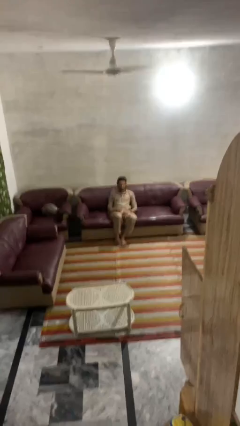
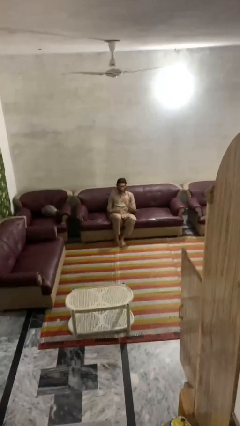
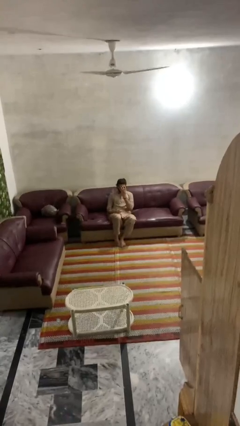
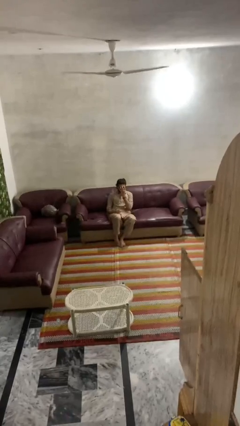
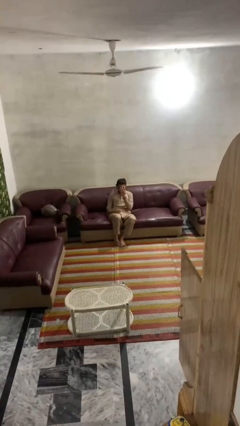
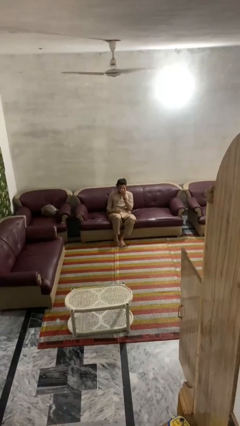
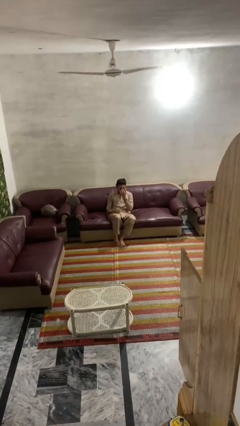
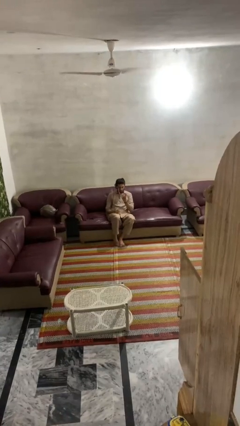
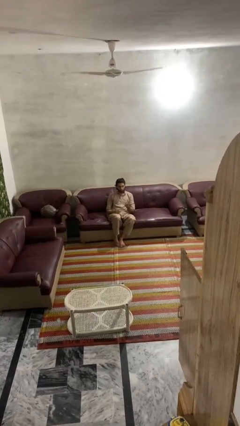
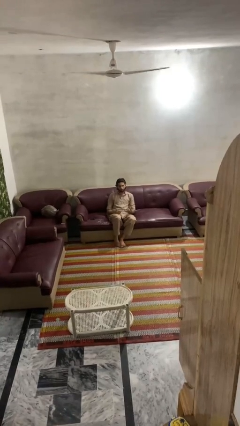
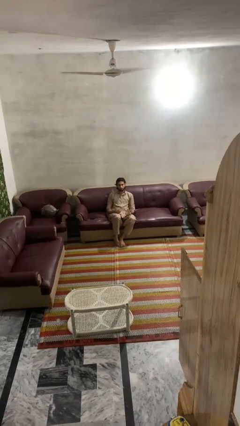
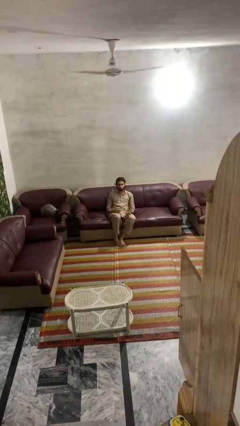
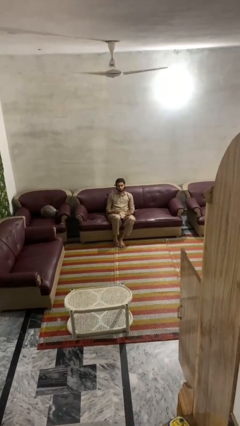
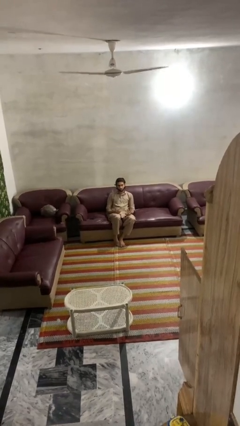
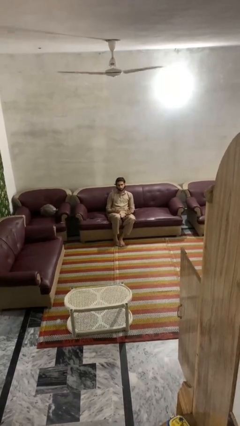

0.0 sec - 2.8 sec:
person takes off glasses

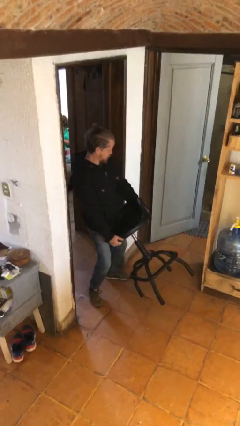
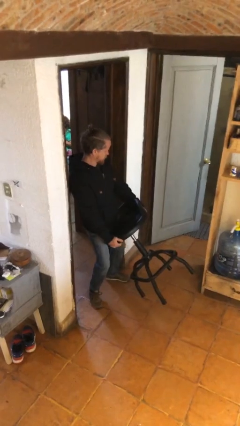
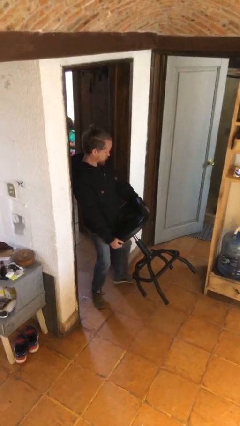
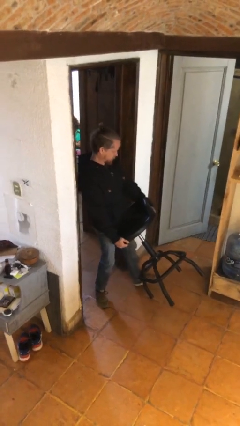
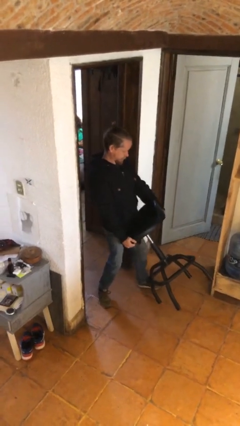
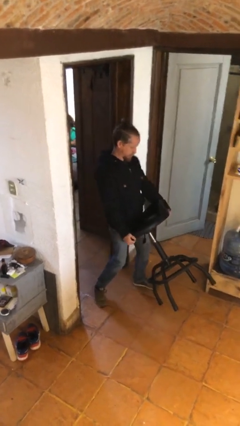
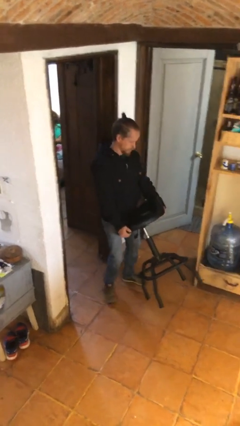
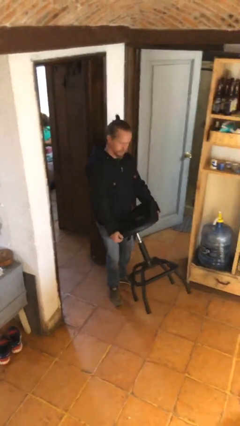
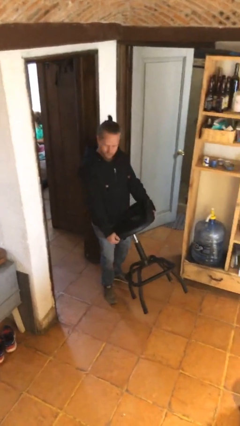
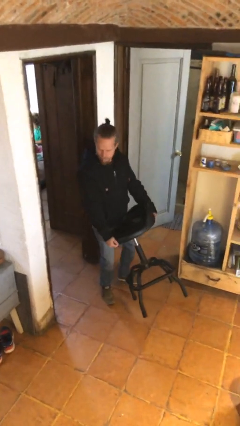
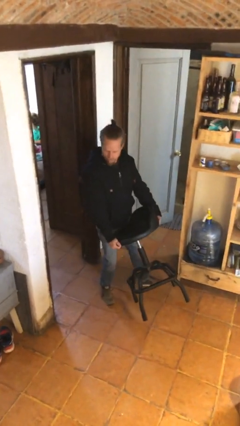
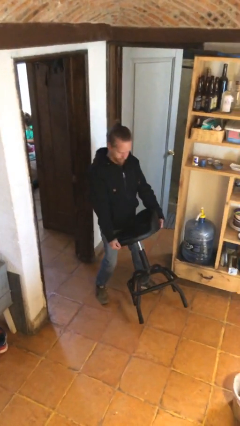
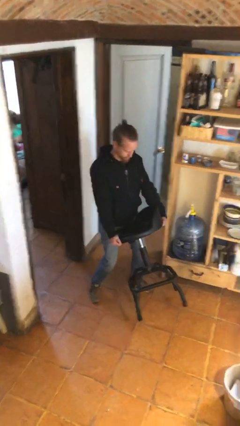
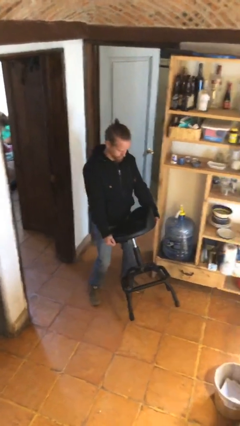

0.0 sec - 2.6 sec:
person carries heavy object

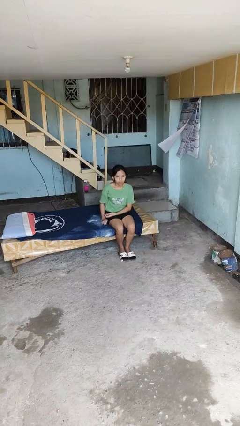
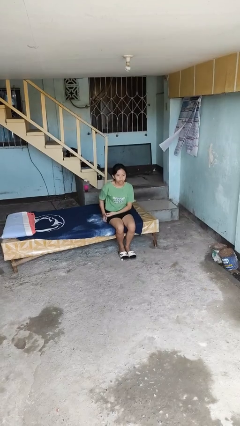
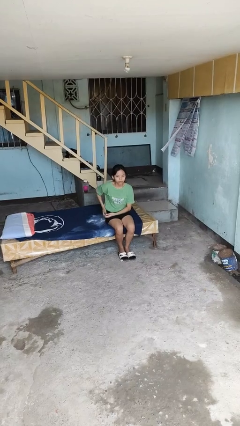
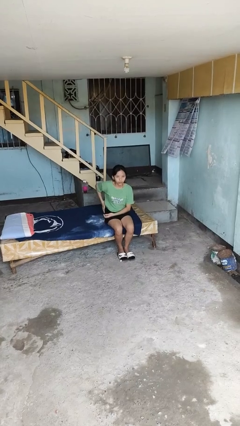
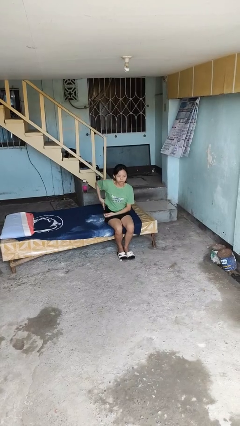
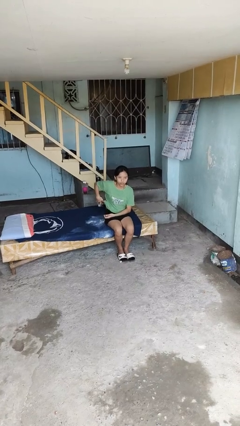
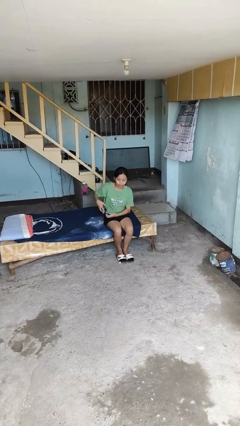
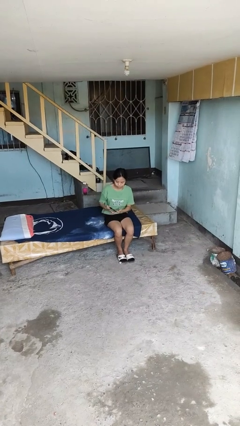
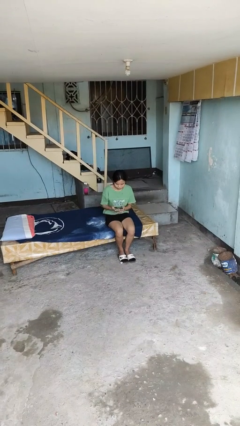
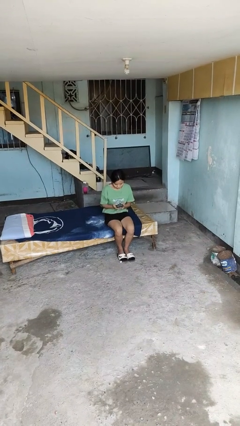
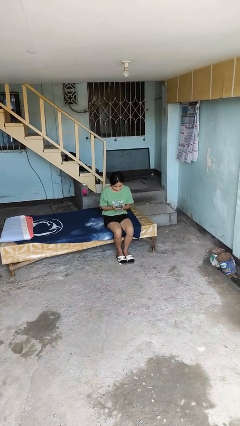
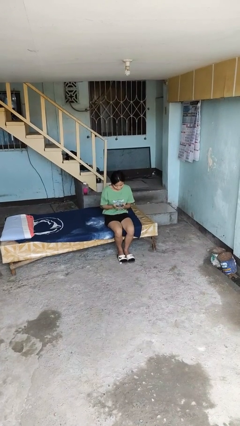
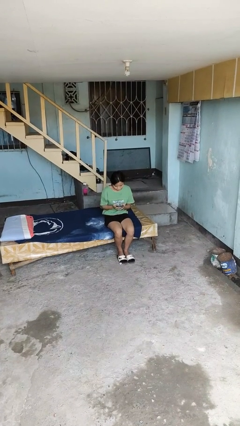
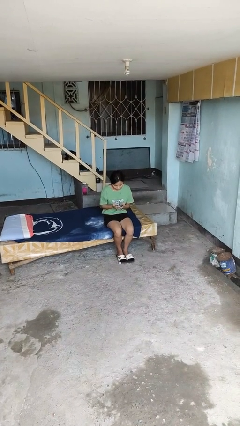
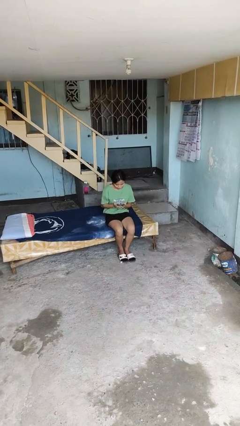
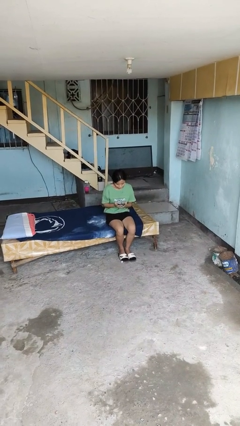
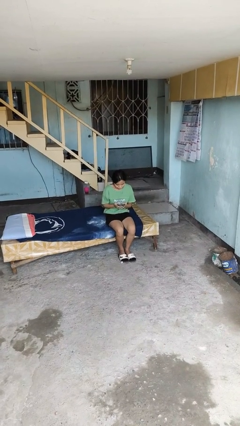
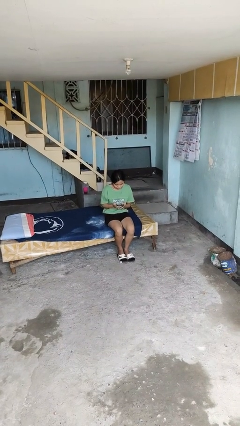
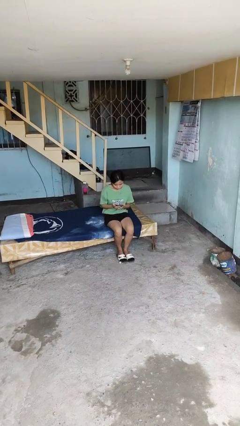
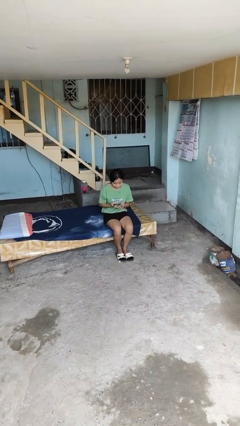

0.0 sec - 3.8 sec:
person takes phone from pocket

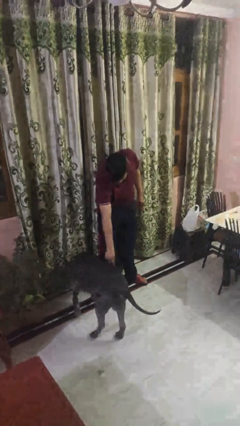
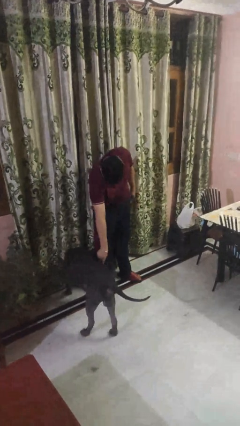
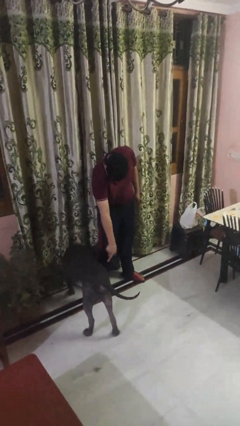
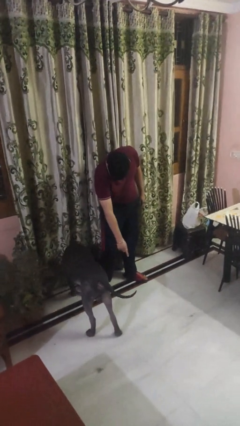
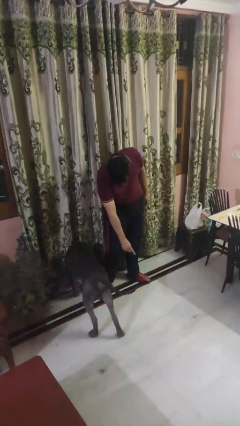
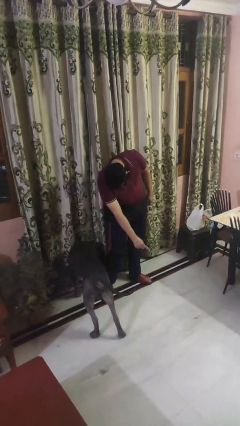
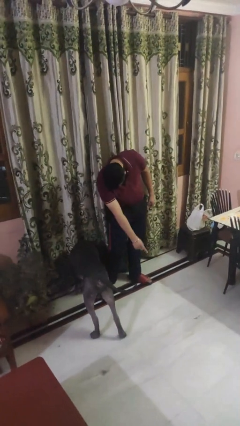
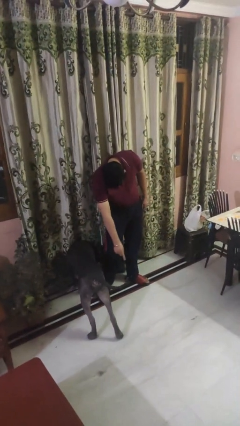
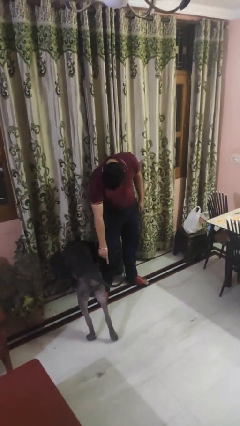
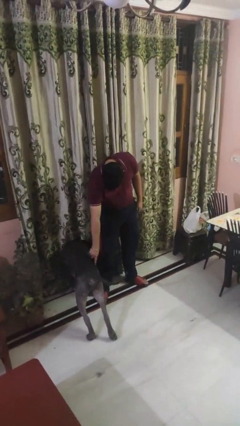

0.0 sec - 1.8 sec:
person points to dog

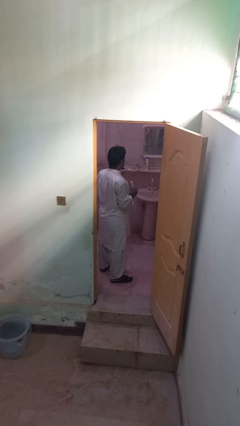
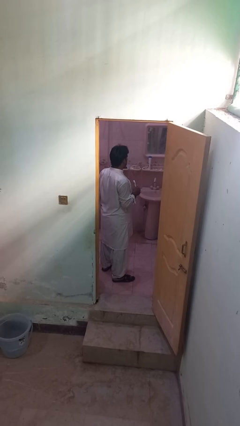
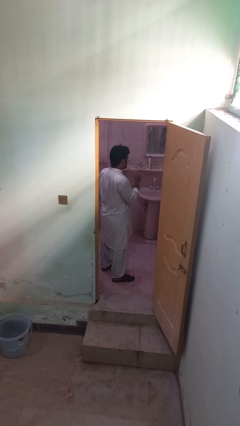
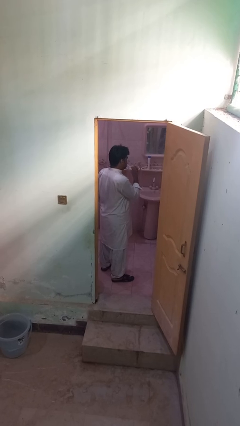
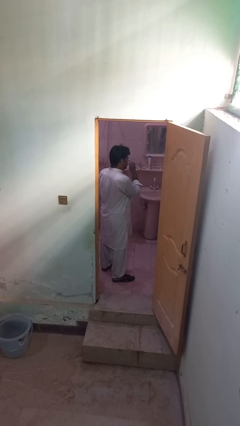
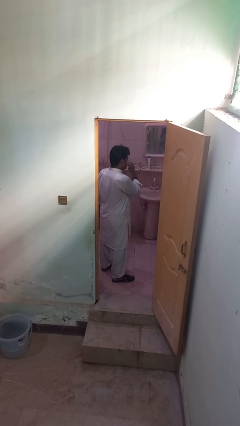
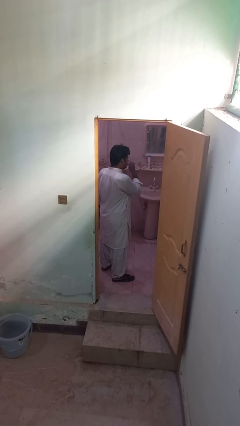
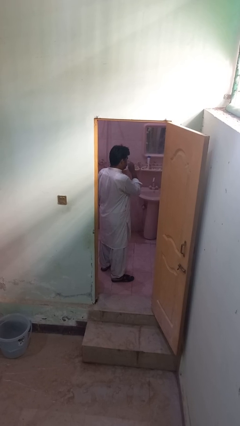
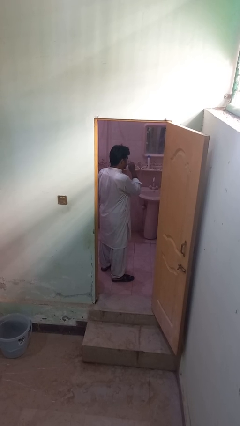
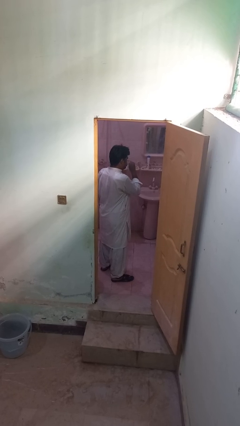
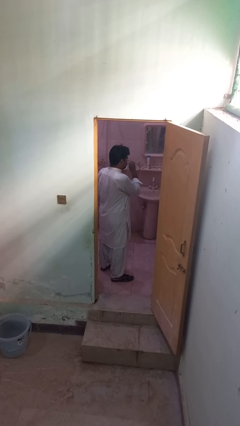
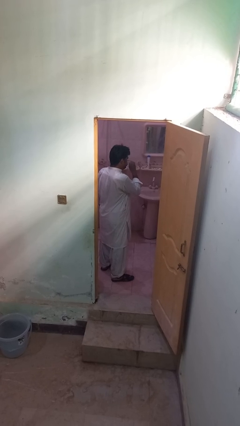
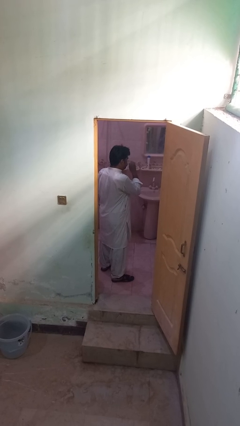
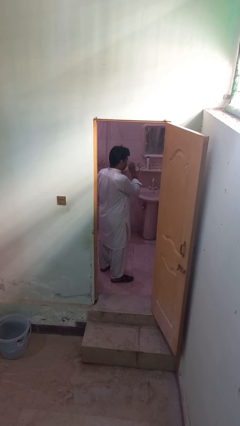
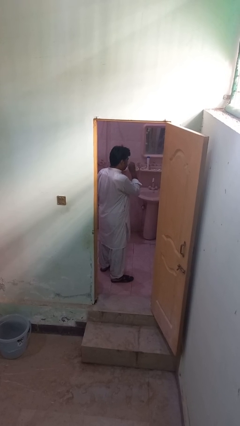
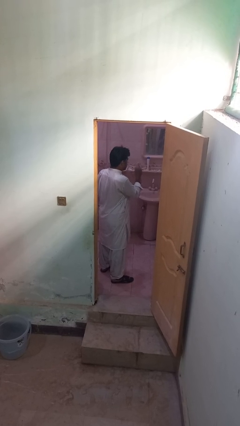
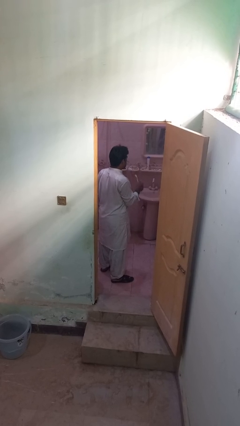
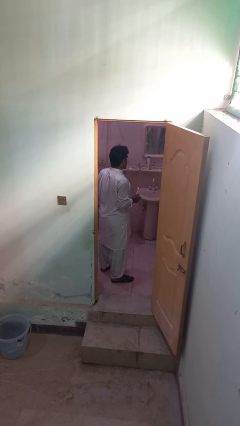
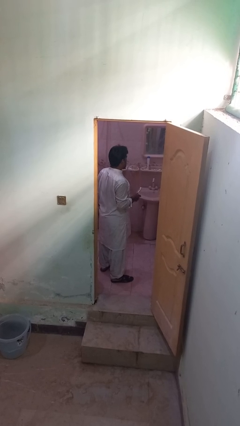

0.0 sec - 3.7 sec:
person brushes teeth

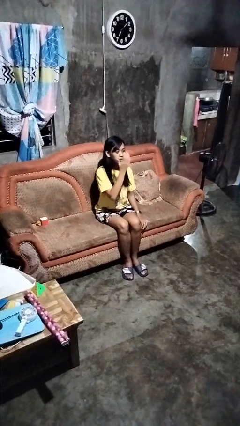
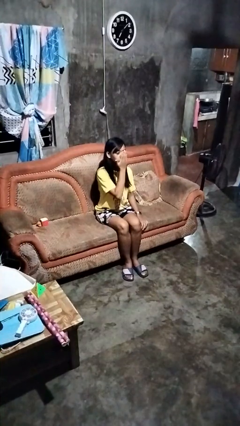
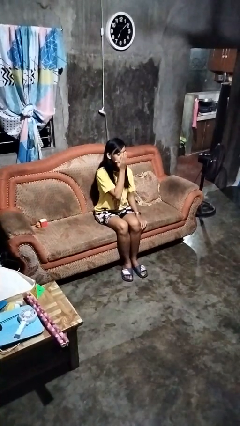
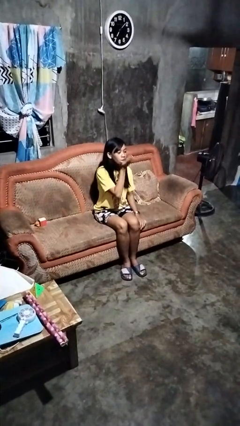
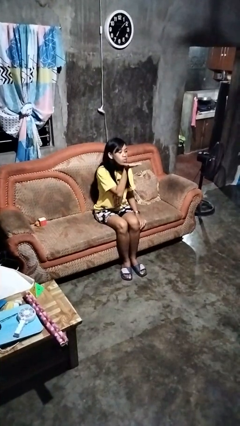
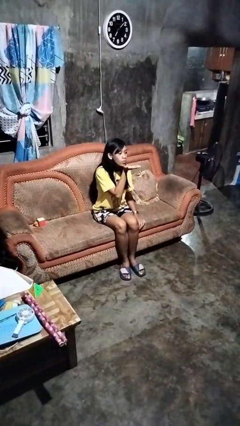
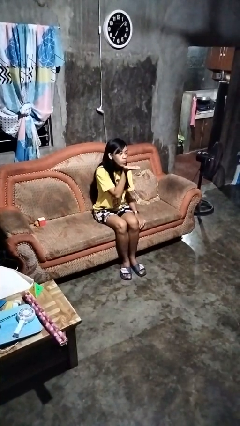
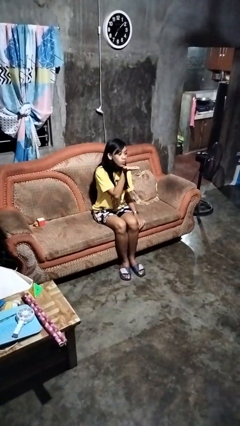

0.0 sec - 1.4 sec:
person gestures blow kiss

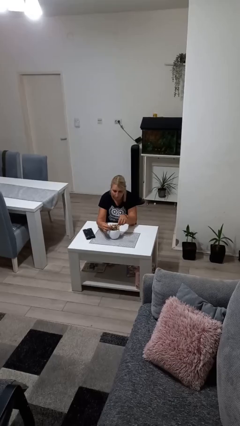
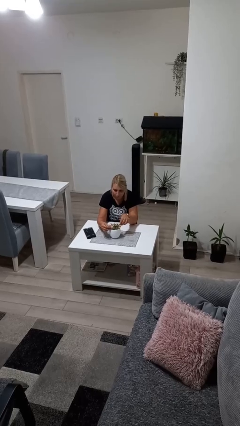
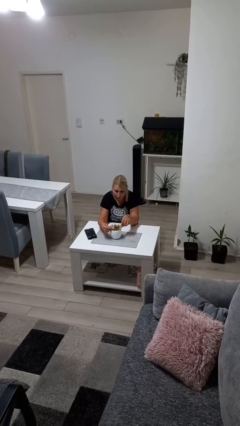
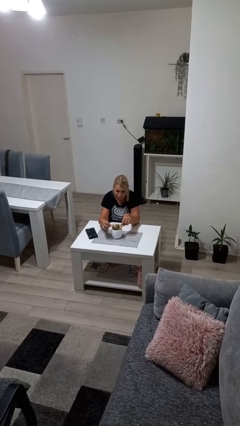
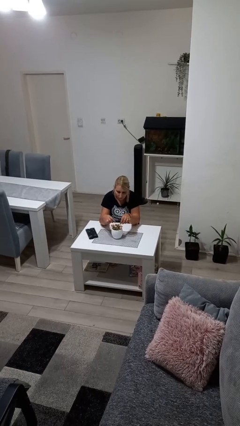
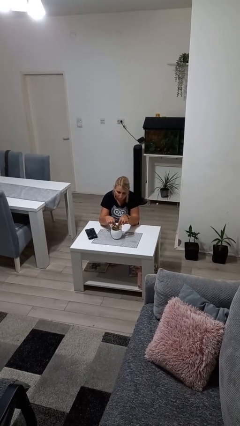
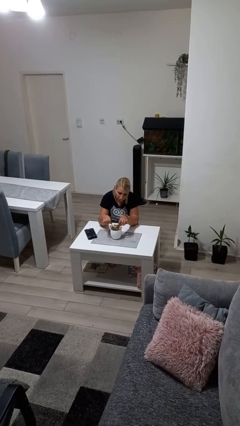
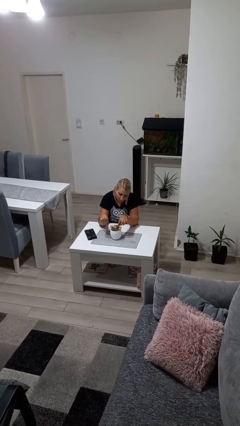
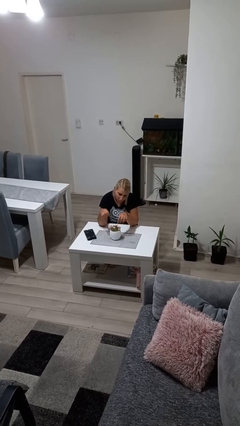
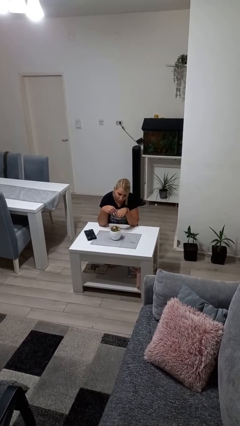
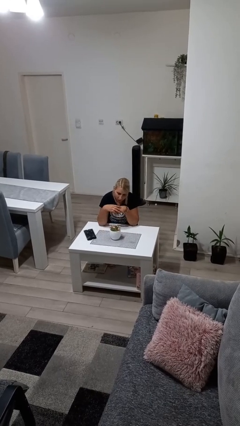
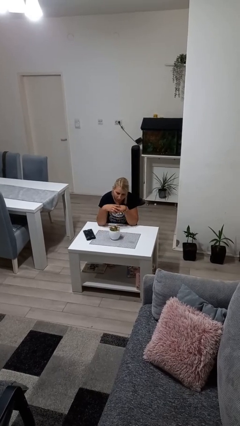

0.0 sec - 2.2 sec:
person arranges flowers in vase
